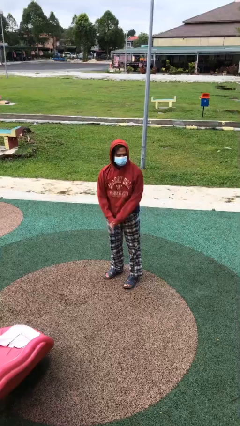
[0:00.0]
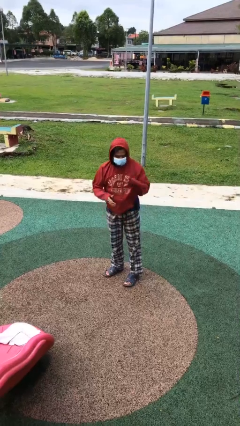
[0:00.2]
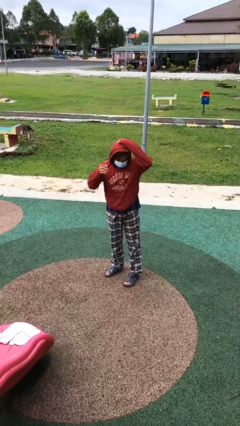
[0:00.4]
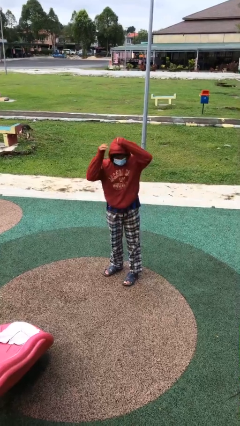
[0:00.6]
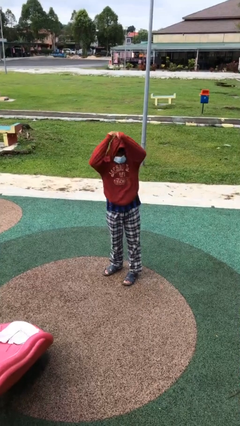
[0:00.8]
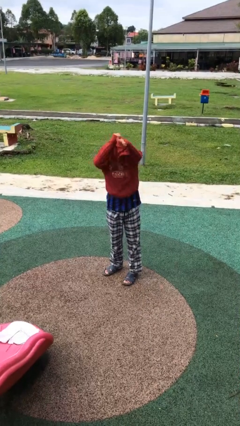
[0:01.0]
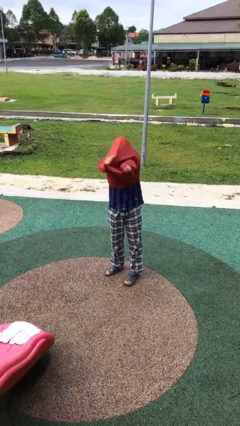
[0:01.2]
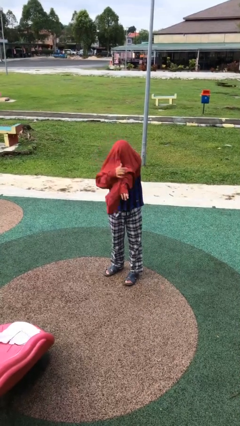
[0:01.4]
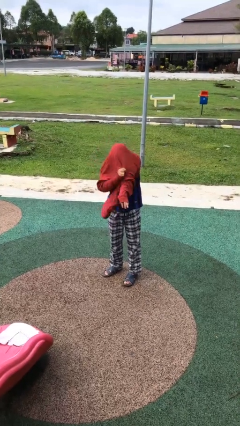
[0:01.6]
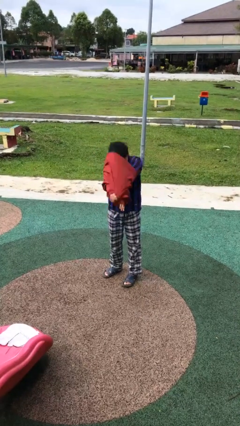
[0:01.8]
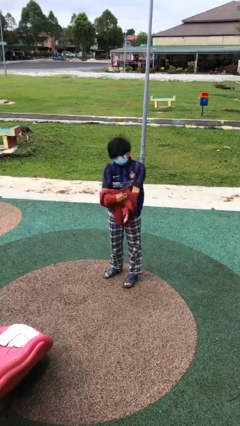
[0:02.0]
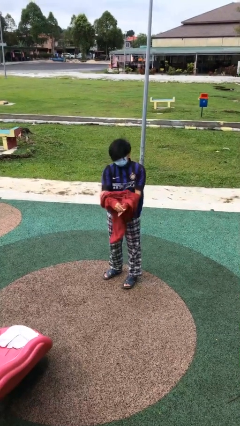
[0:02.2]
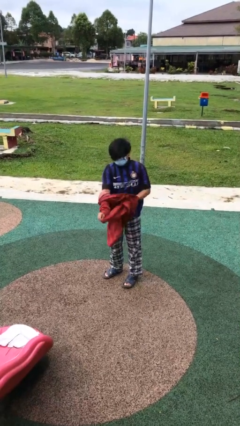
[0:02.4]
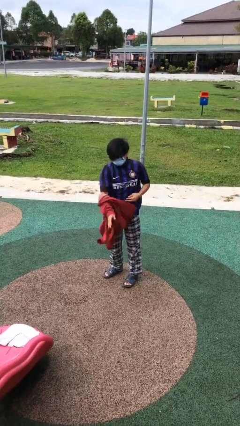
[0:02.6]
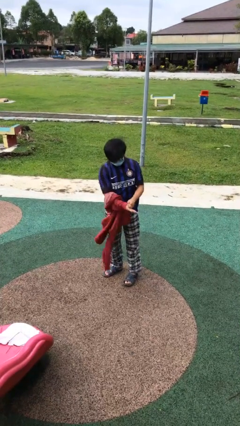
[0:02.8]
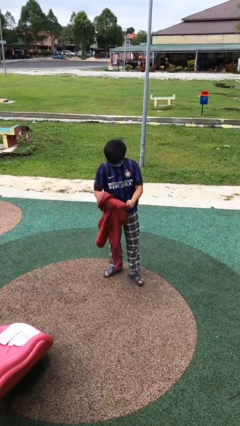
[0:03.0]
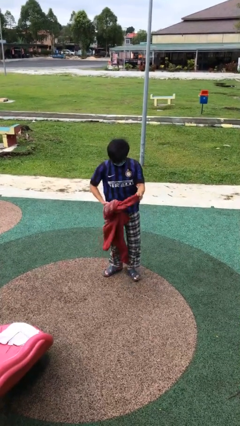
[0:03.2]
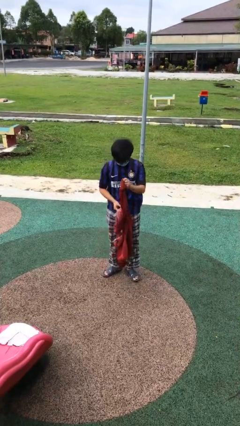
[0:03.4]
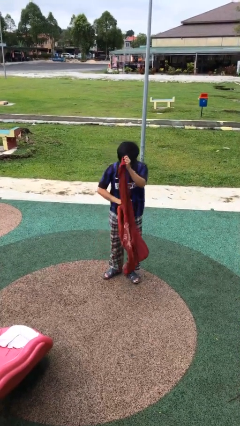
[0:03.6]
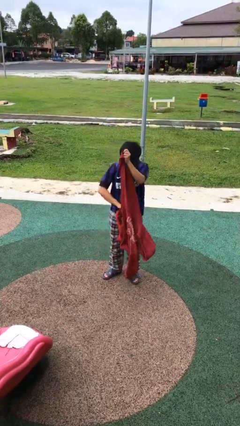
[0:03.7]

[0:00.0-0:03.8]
person takes off hoodie

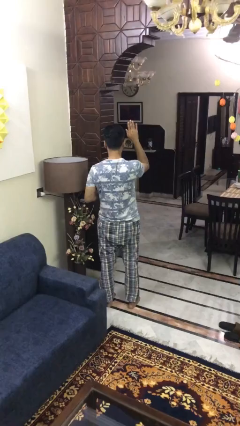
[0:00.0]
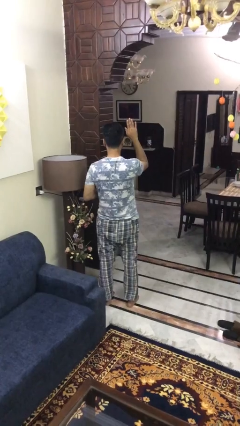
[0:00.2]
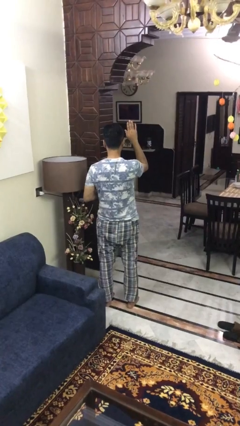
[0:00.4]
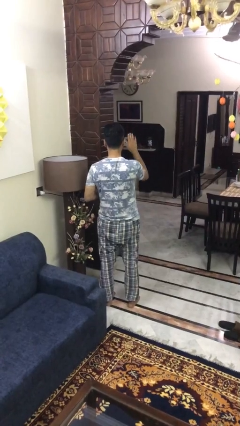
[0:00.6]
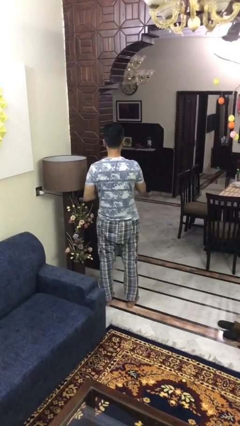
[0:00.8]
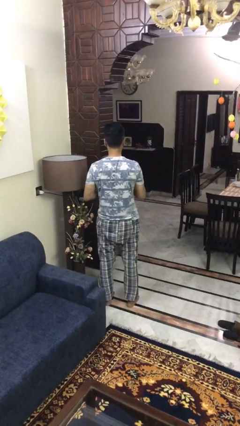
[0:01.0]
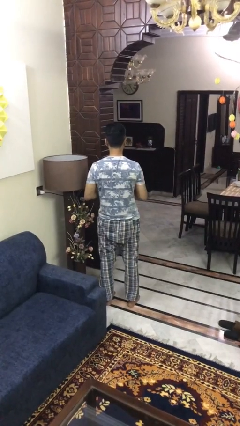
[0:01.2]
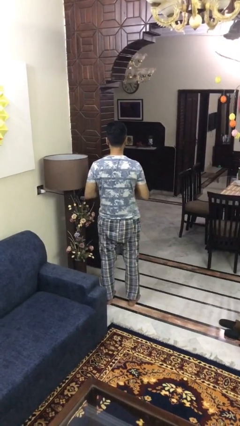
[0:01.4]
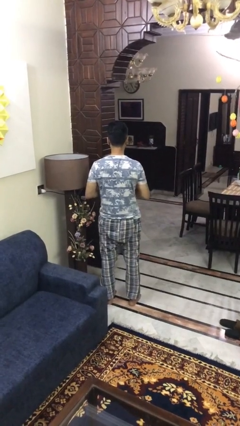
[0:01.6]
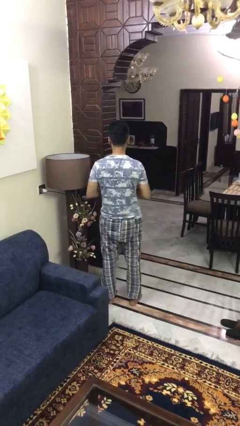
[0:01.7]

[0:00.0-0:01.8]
person gestures lower hand

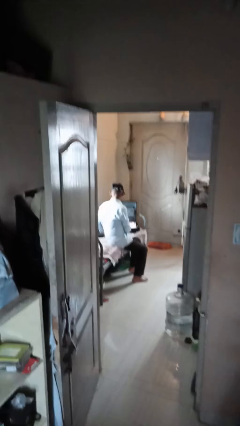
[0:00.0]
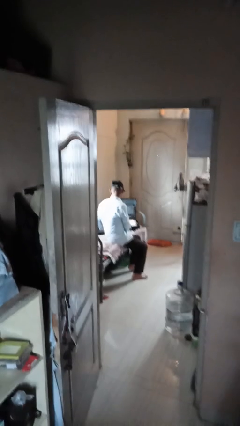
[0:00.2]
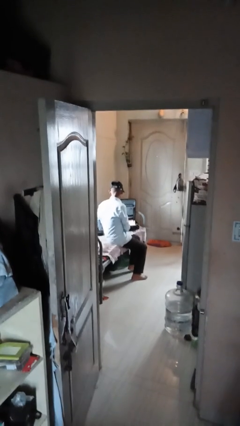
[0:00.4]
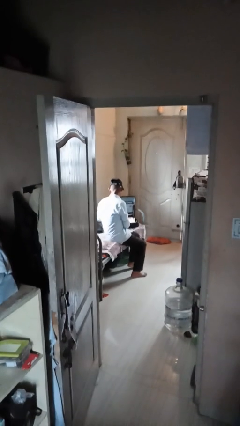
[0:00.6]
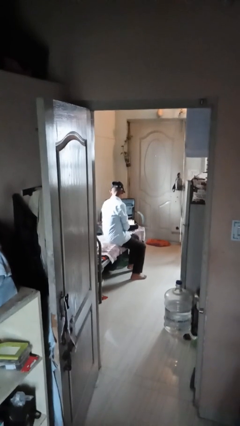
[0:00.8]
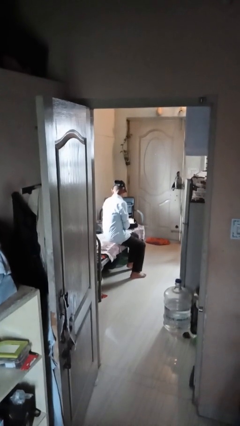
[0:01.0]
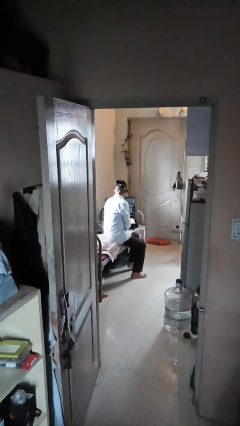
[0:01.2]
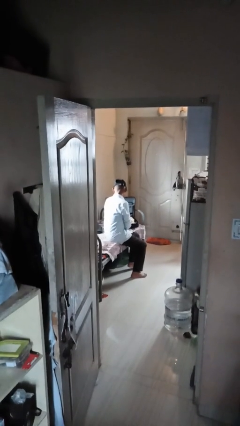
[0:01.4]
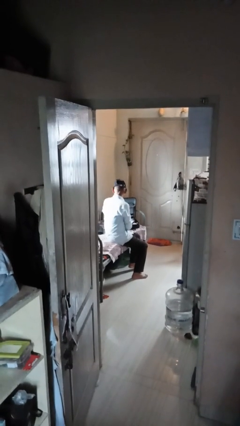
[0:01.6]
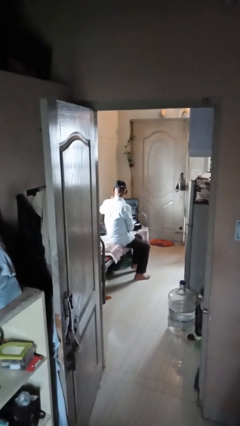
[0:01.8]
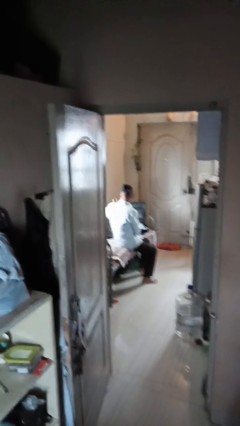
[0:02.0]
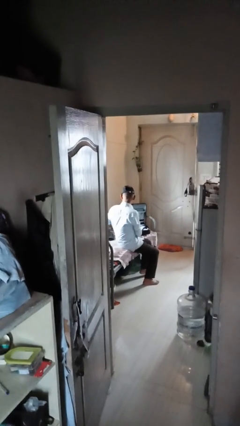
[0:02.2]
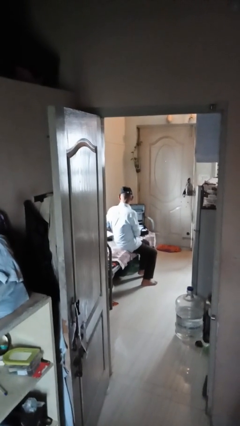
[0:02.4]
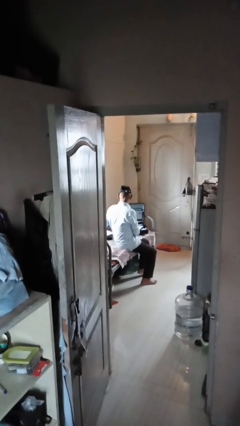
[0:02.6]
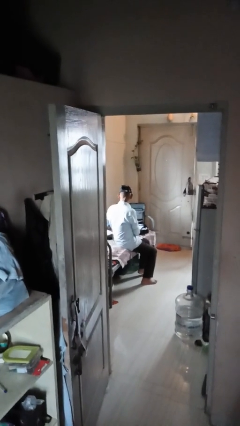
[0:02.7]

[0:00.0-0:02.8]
person unloads clothes from suitcase

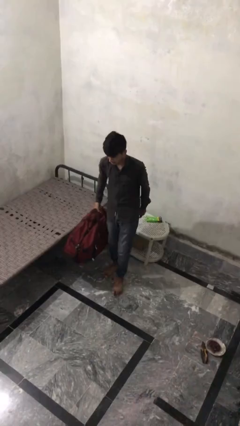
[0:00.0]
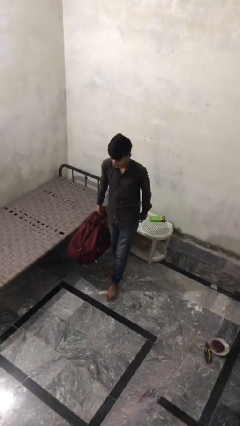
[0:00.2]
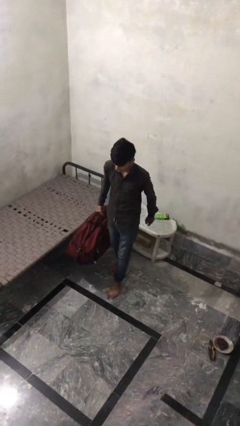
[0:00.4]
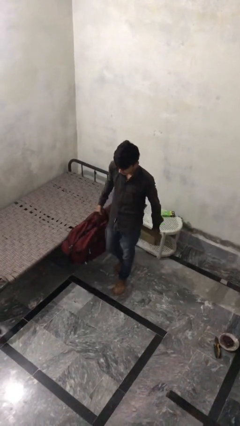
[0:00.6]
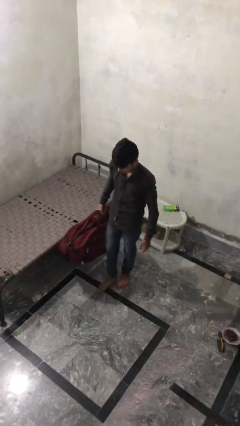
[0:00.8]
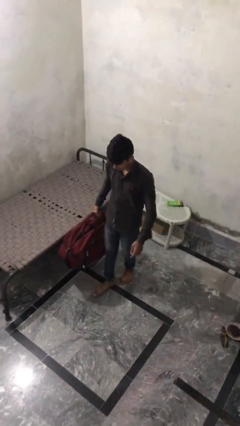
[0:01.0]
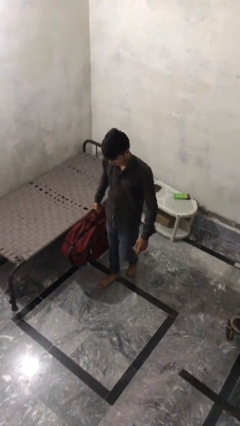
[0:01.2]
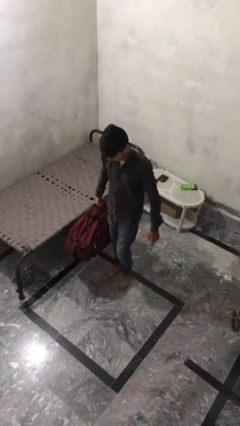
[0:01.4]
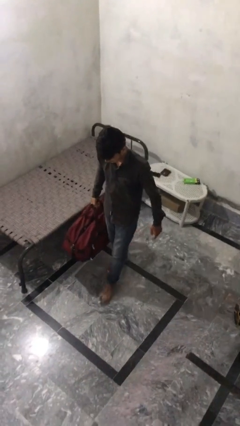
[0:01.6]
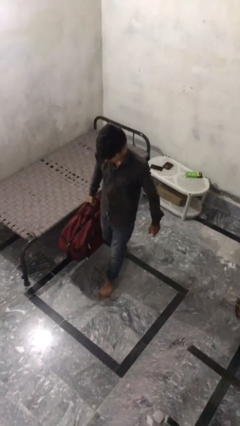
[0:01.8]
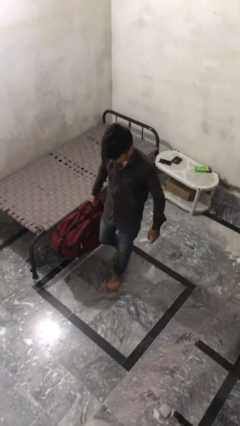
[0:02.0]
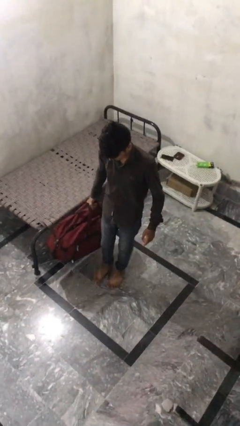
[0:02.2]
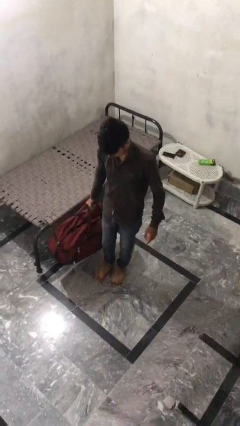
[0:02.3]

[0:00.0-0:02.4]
person carries heavy object

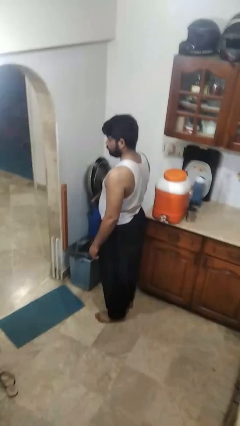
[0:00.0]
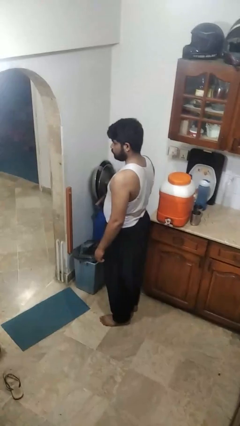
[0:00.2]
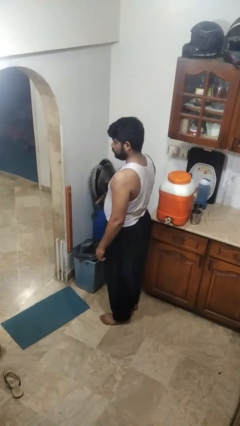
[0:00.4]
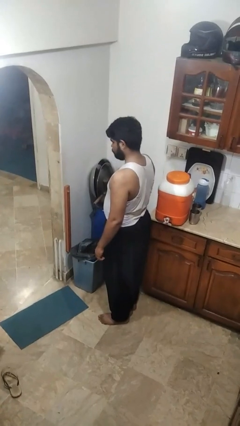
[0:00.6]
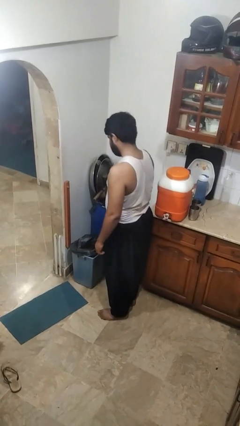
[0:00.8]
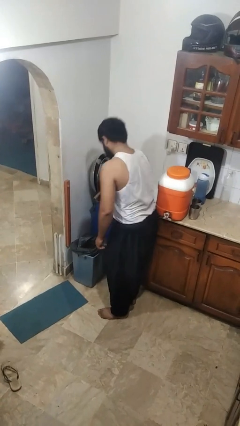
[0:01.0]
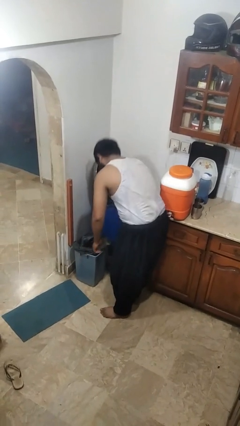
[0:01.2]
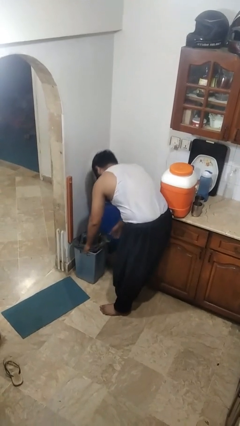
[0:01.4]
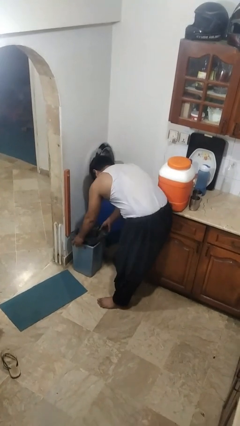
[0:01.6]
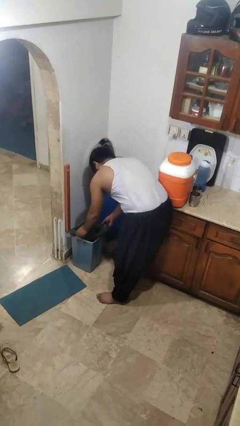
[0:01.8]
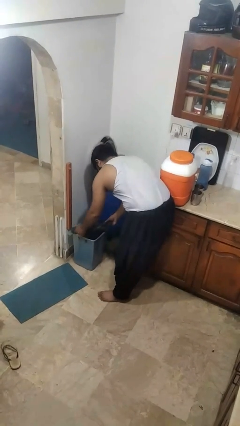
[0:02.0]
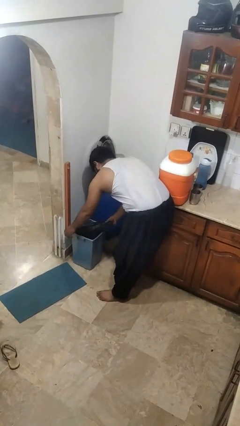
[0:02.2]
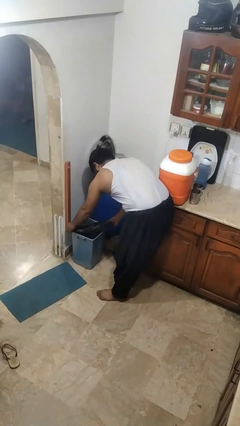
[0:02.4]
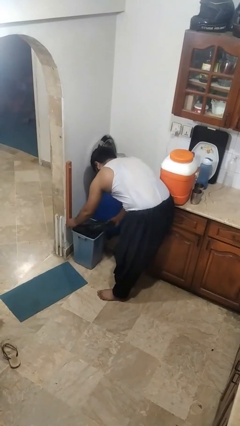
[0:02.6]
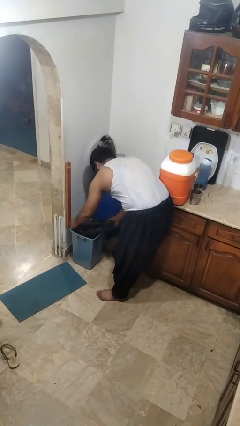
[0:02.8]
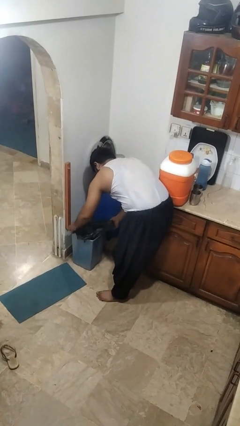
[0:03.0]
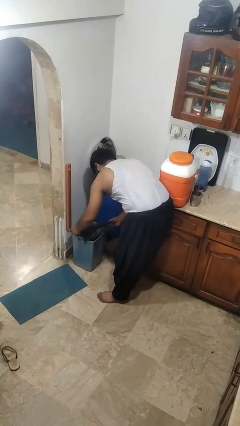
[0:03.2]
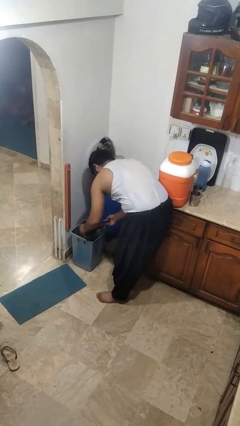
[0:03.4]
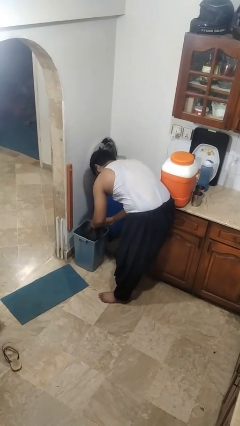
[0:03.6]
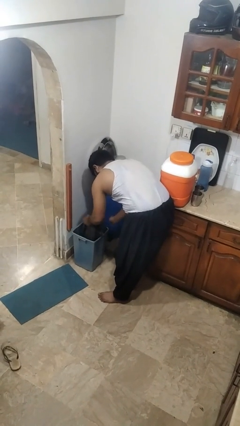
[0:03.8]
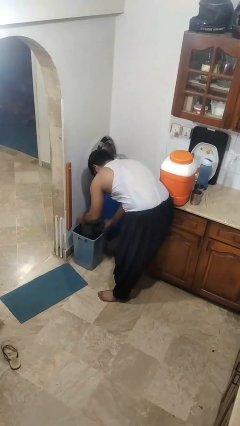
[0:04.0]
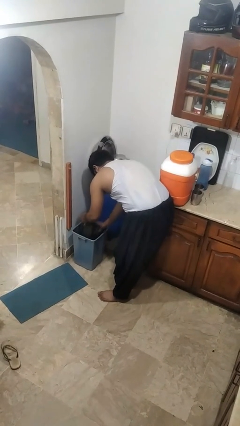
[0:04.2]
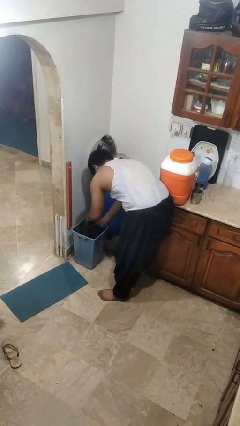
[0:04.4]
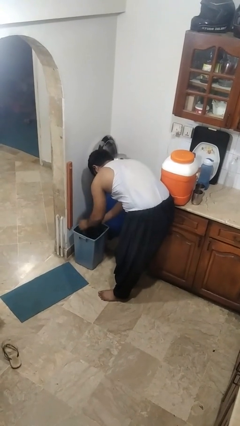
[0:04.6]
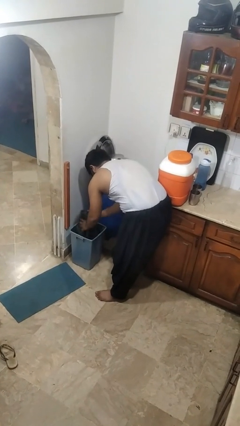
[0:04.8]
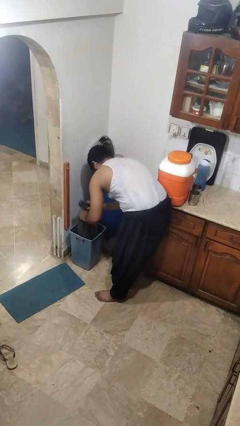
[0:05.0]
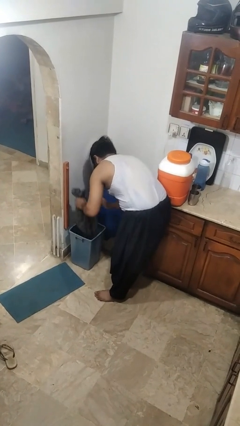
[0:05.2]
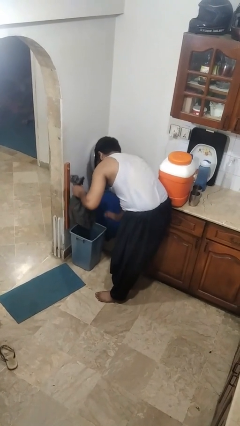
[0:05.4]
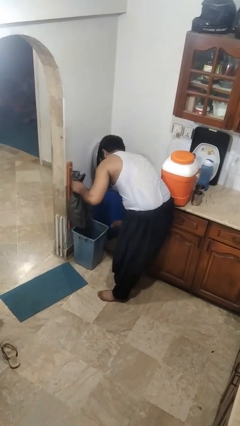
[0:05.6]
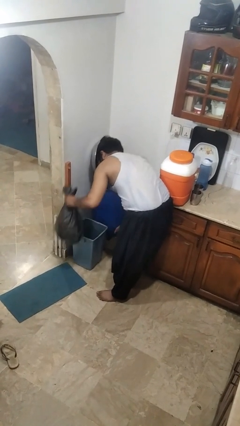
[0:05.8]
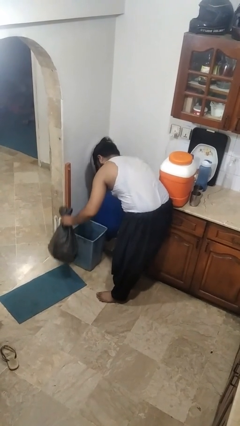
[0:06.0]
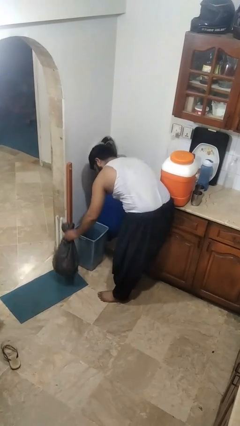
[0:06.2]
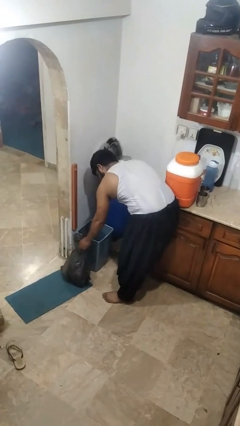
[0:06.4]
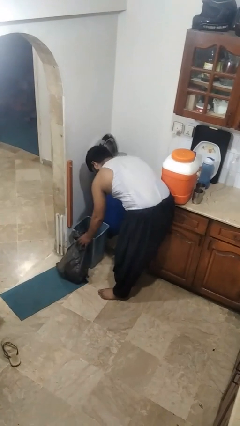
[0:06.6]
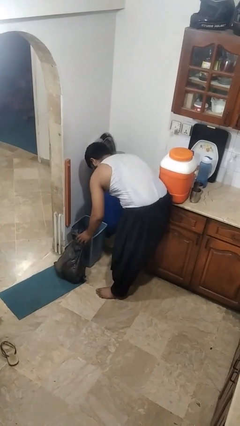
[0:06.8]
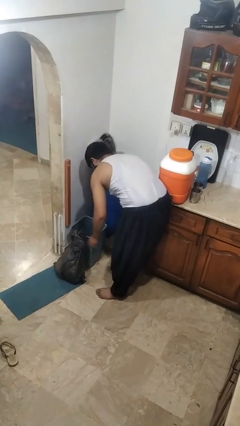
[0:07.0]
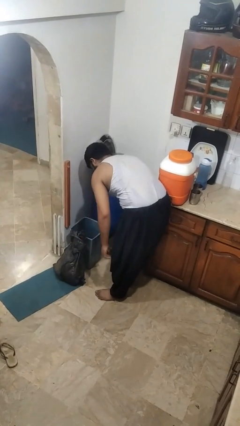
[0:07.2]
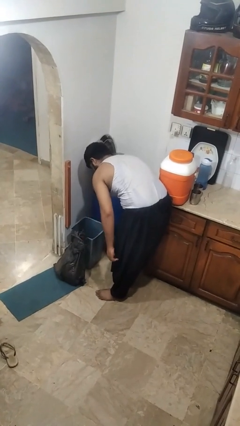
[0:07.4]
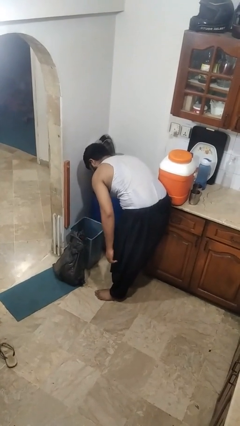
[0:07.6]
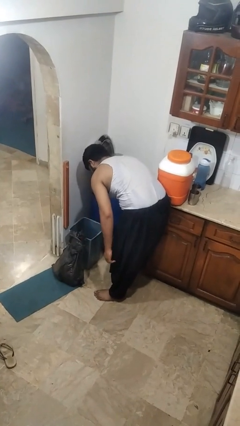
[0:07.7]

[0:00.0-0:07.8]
person removes trashbag from trashcan
